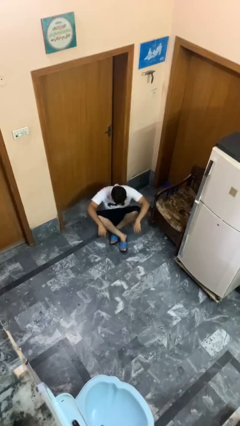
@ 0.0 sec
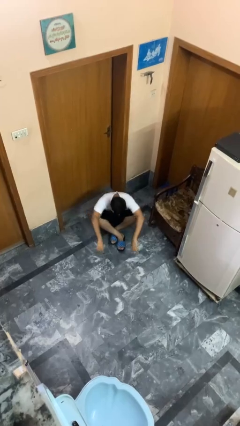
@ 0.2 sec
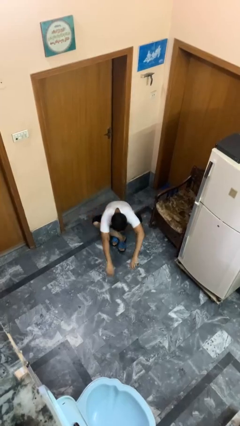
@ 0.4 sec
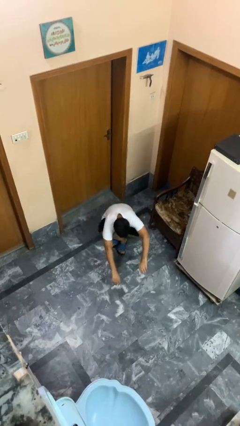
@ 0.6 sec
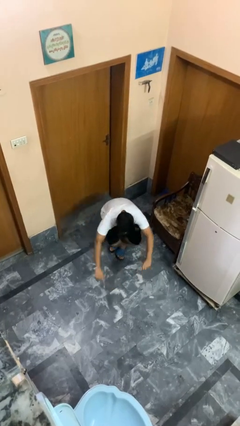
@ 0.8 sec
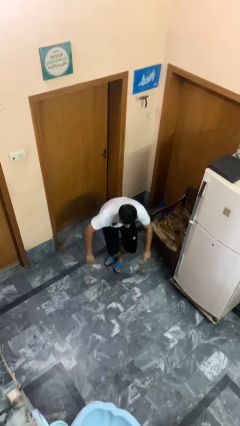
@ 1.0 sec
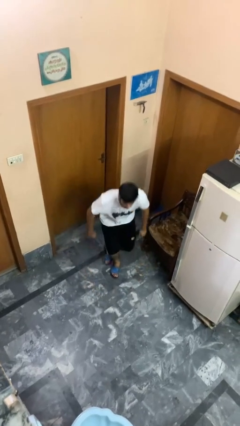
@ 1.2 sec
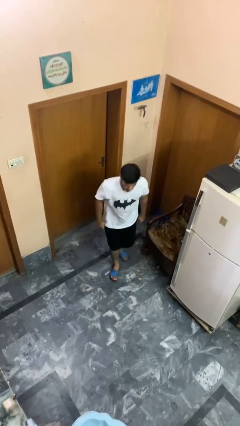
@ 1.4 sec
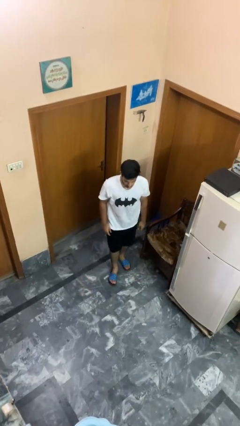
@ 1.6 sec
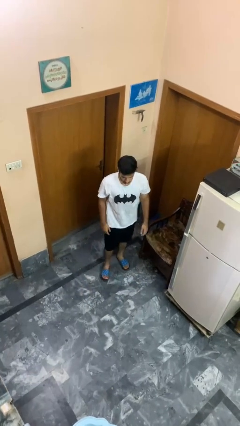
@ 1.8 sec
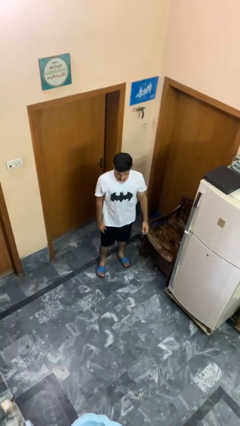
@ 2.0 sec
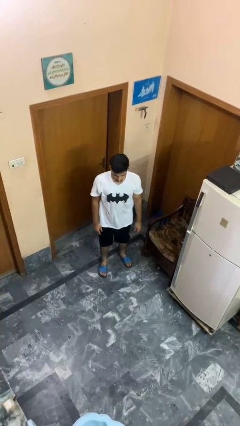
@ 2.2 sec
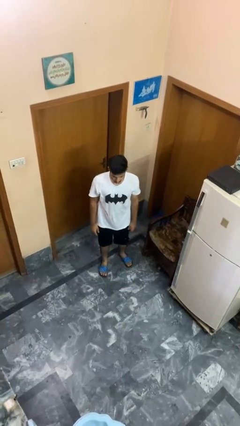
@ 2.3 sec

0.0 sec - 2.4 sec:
person stands up from floor

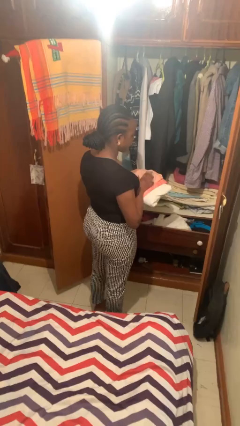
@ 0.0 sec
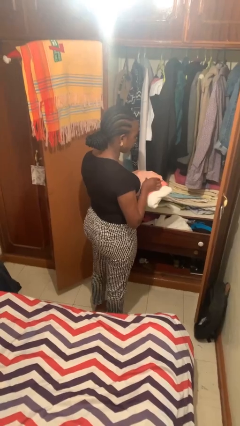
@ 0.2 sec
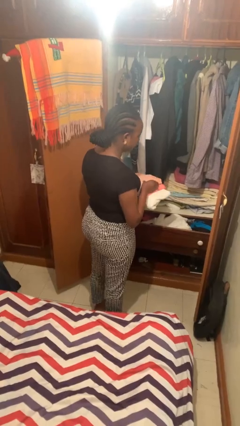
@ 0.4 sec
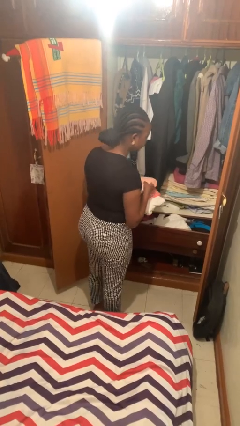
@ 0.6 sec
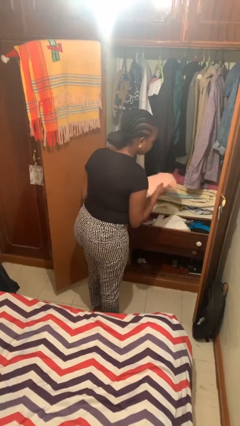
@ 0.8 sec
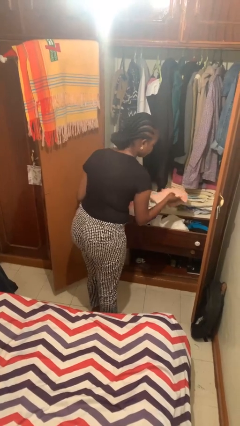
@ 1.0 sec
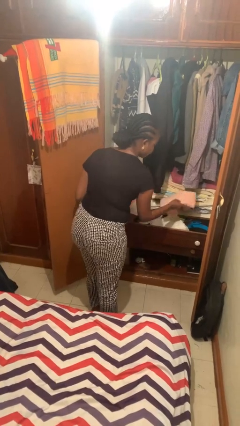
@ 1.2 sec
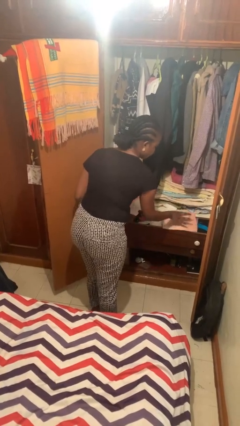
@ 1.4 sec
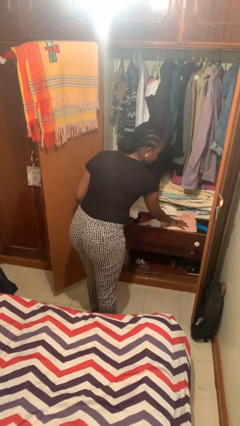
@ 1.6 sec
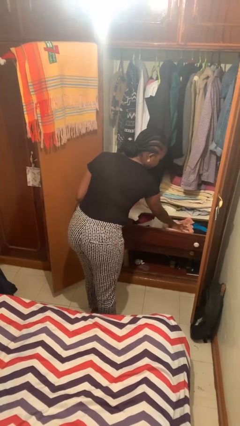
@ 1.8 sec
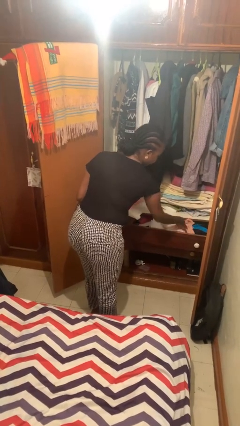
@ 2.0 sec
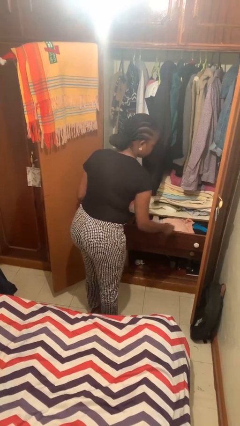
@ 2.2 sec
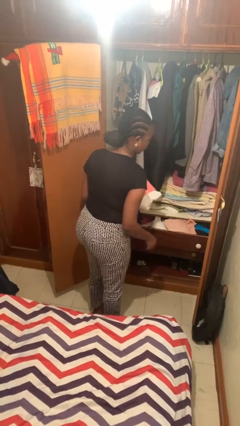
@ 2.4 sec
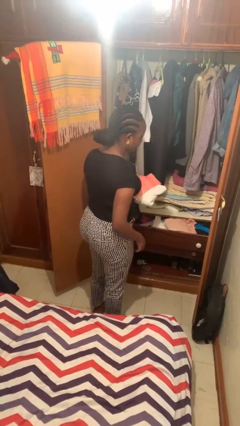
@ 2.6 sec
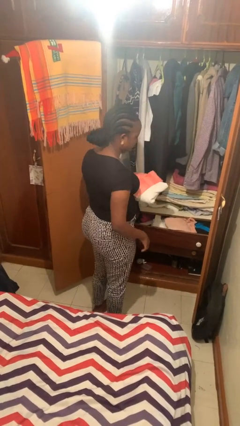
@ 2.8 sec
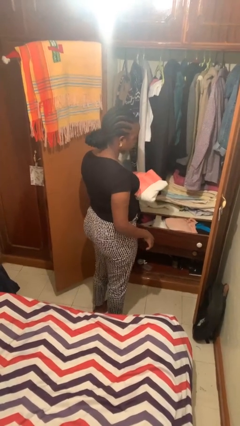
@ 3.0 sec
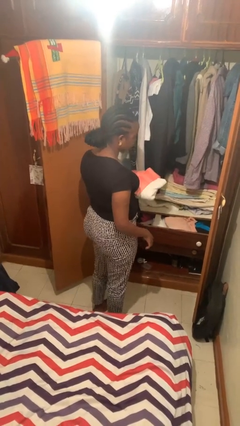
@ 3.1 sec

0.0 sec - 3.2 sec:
person puts clothes into dresser

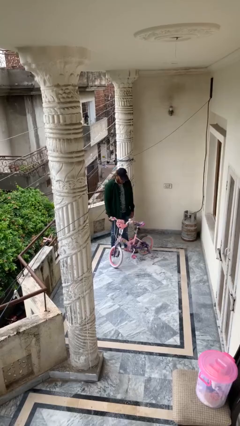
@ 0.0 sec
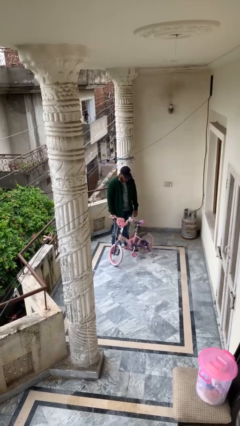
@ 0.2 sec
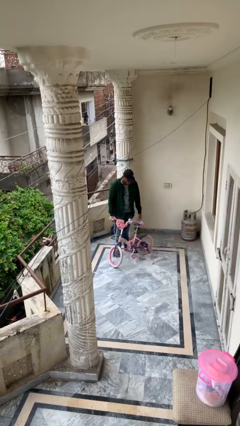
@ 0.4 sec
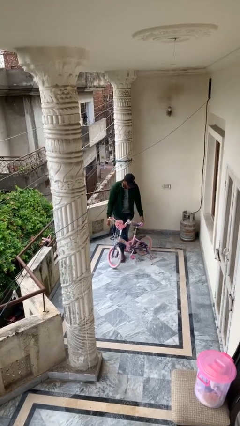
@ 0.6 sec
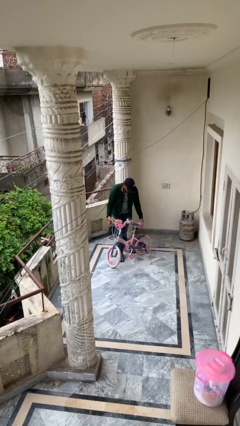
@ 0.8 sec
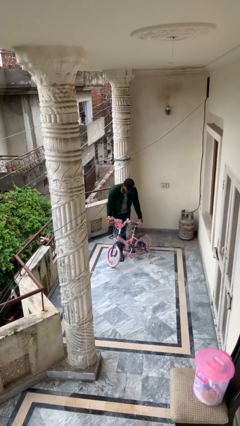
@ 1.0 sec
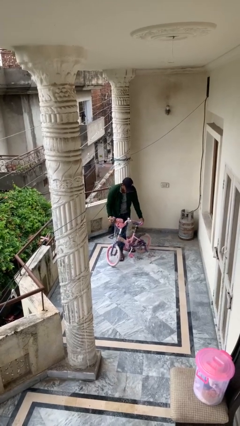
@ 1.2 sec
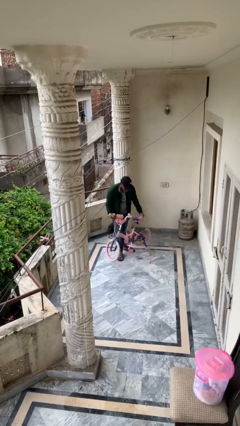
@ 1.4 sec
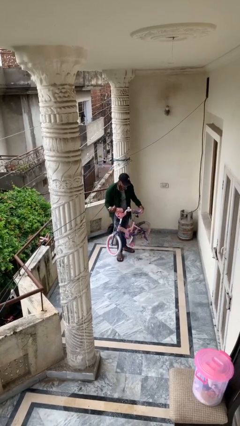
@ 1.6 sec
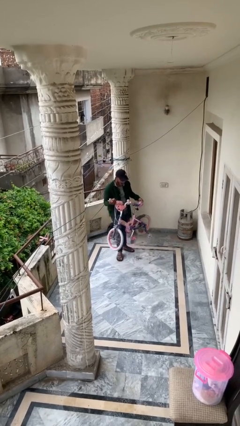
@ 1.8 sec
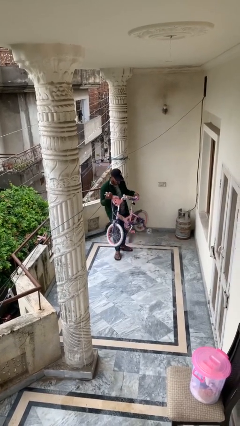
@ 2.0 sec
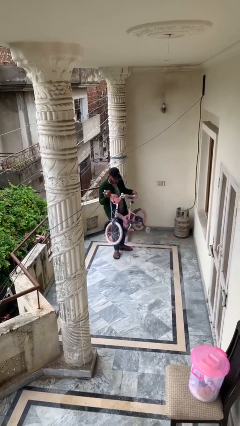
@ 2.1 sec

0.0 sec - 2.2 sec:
person picks up object from floor

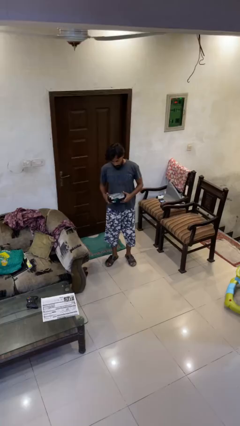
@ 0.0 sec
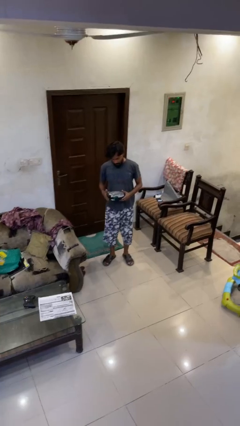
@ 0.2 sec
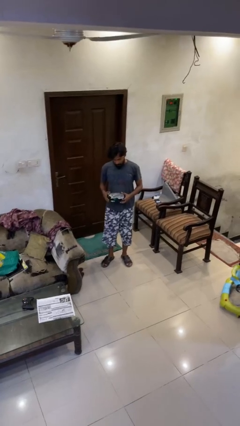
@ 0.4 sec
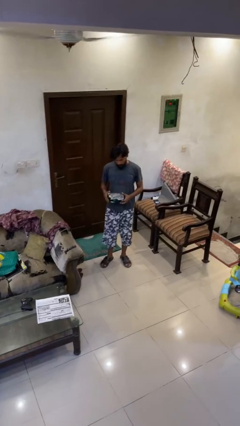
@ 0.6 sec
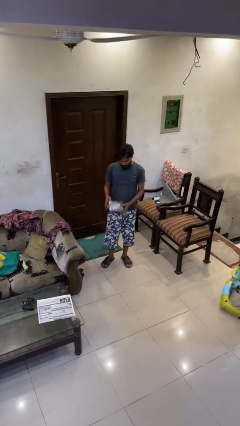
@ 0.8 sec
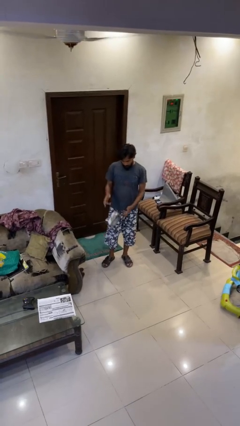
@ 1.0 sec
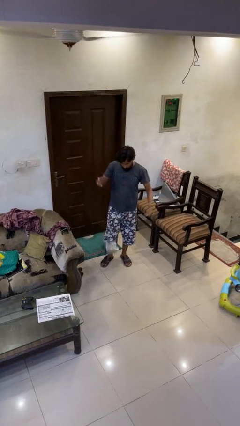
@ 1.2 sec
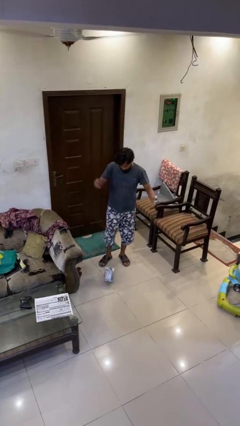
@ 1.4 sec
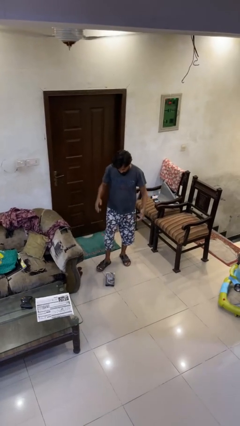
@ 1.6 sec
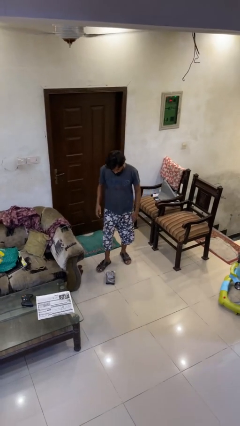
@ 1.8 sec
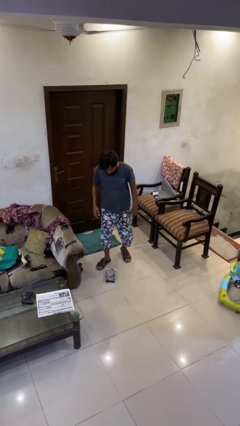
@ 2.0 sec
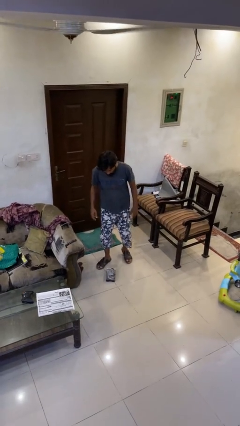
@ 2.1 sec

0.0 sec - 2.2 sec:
person drops object

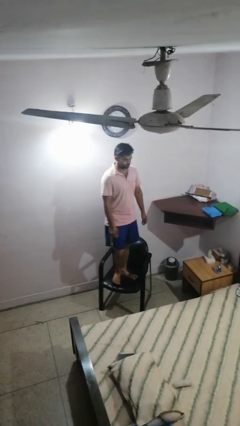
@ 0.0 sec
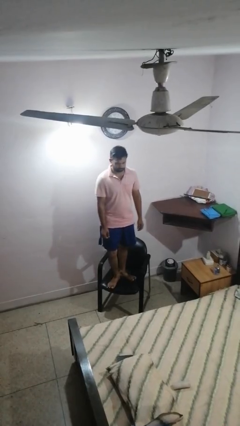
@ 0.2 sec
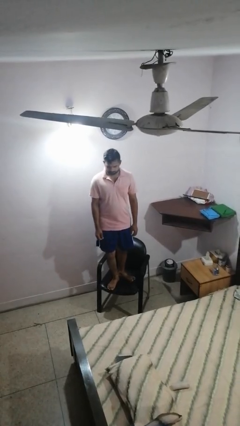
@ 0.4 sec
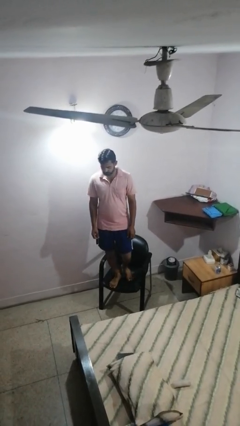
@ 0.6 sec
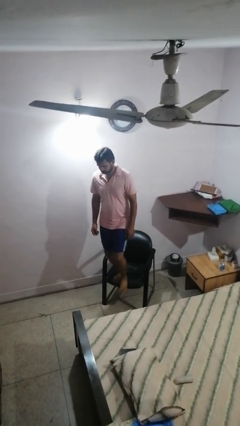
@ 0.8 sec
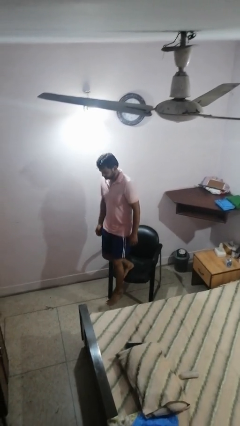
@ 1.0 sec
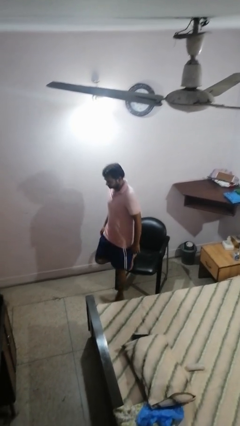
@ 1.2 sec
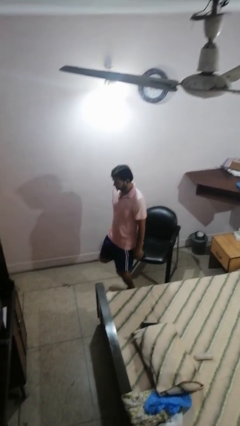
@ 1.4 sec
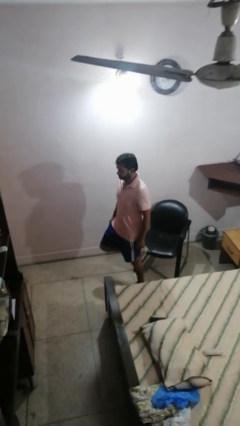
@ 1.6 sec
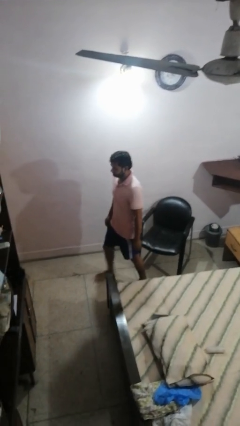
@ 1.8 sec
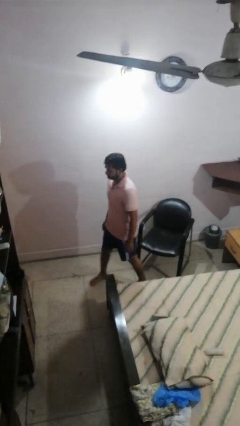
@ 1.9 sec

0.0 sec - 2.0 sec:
person climbs off chair

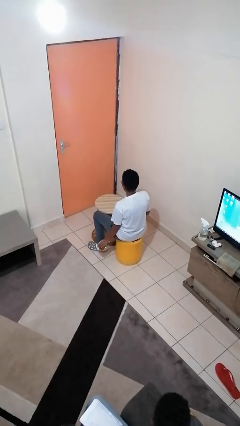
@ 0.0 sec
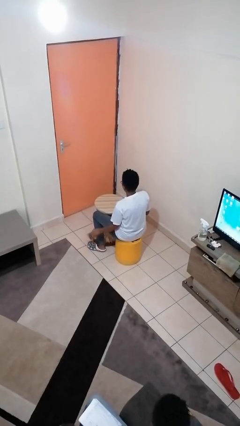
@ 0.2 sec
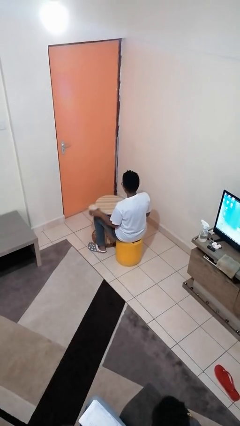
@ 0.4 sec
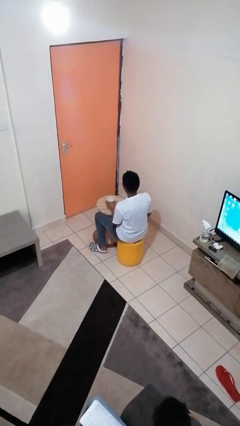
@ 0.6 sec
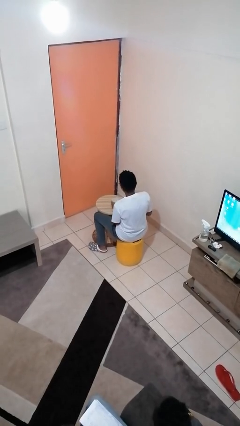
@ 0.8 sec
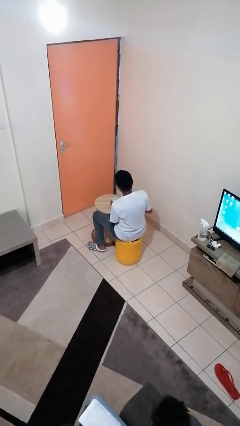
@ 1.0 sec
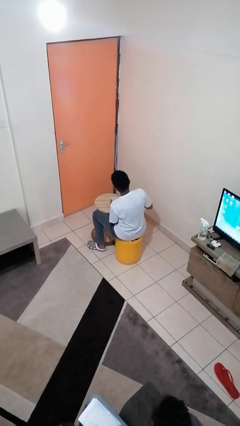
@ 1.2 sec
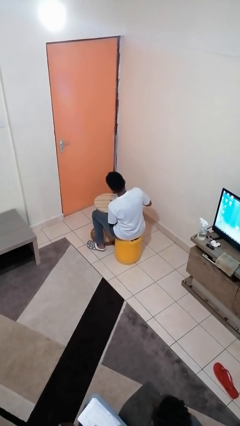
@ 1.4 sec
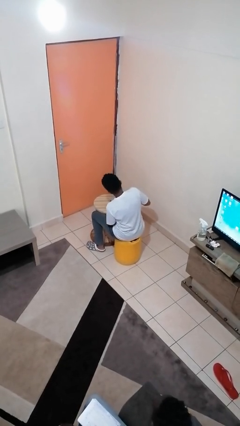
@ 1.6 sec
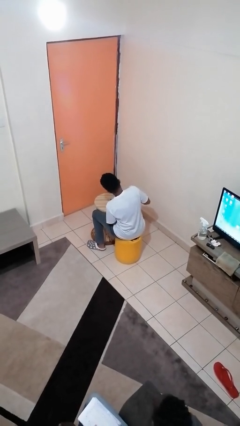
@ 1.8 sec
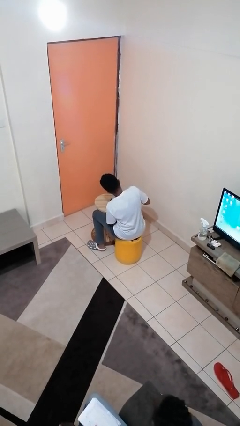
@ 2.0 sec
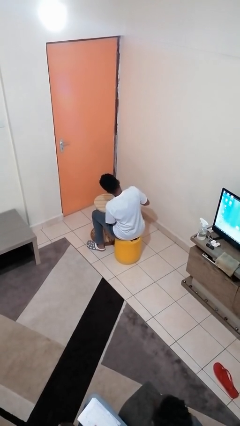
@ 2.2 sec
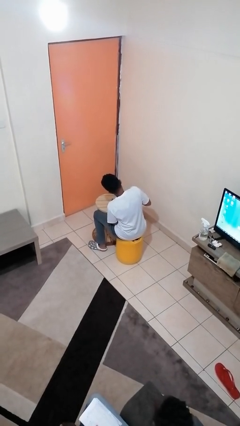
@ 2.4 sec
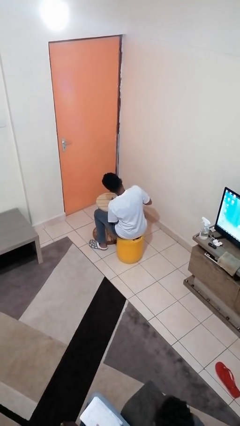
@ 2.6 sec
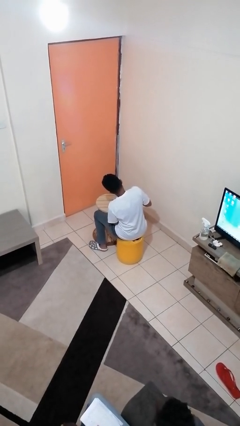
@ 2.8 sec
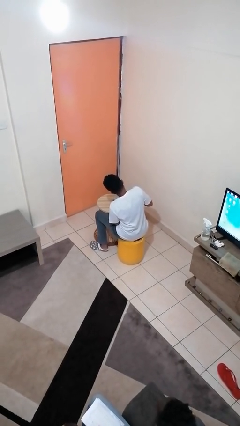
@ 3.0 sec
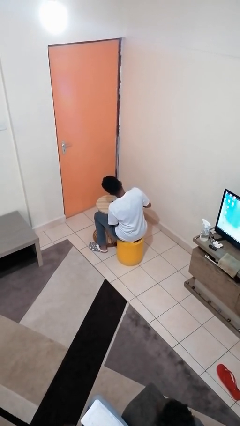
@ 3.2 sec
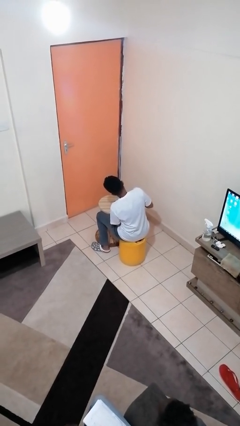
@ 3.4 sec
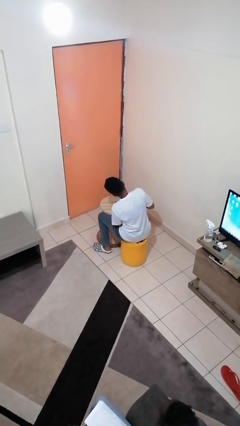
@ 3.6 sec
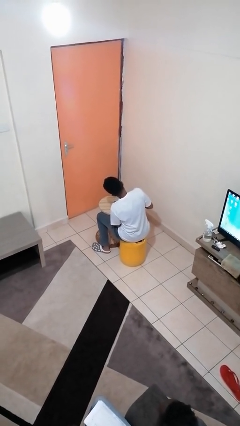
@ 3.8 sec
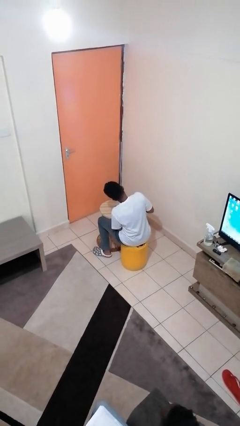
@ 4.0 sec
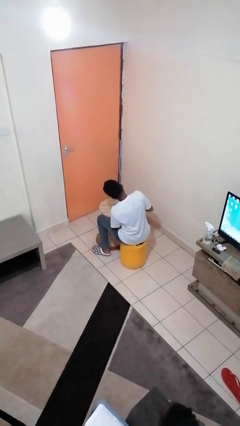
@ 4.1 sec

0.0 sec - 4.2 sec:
person opens can with can opener

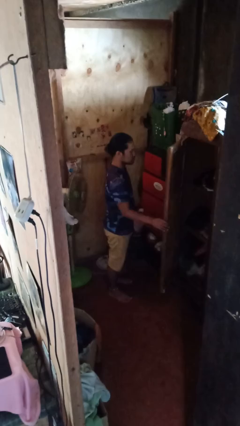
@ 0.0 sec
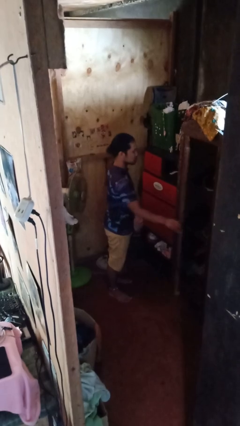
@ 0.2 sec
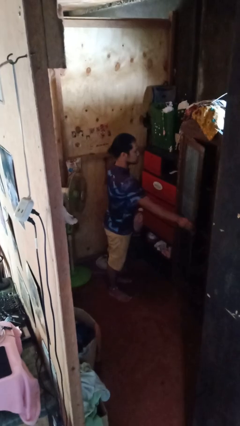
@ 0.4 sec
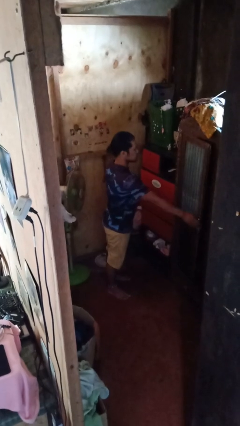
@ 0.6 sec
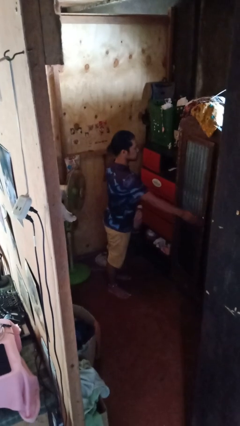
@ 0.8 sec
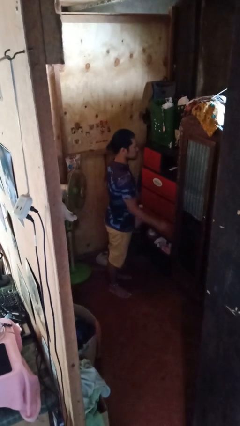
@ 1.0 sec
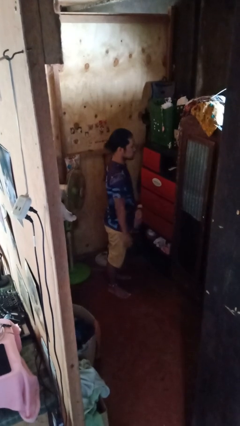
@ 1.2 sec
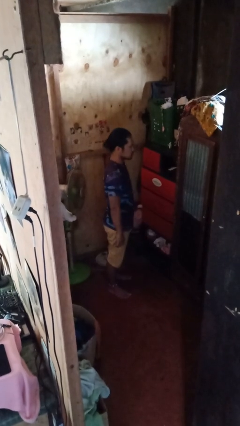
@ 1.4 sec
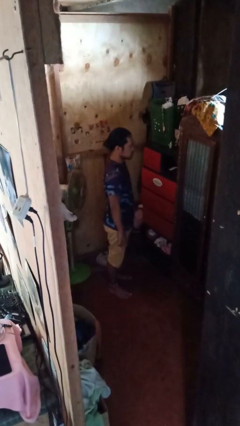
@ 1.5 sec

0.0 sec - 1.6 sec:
person closes closet door
